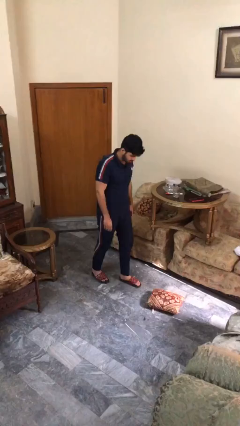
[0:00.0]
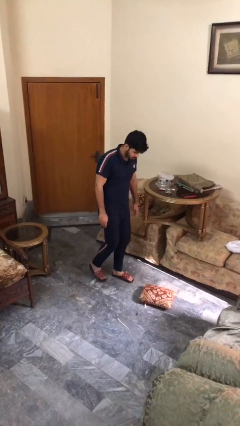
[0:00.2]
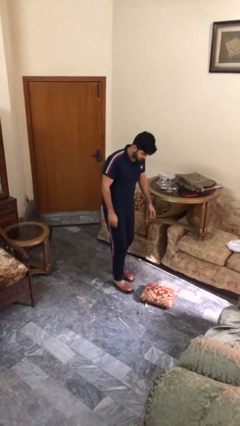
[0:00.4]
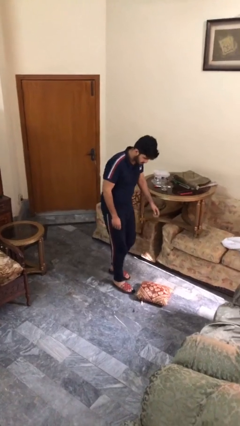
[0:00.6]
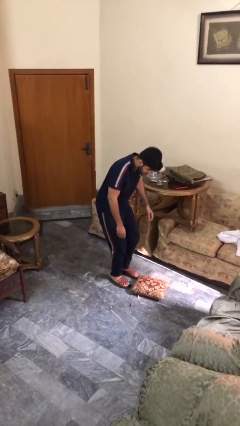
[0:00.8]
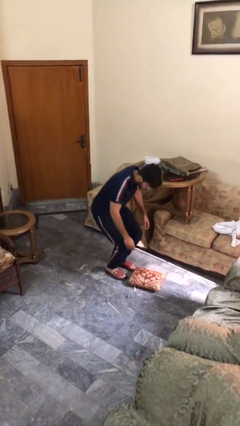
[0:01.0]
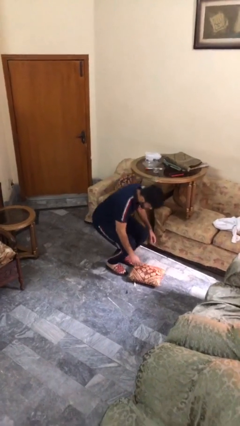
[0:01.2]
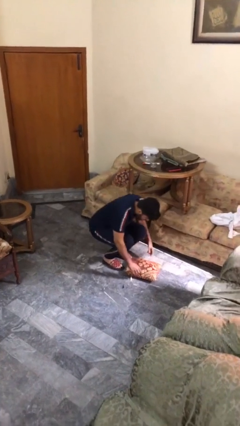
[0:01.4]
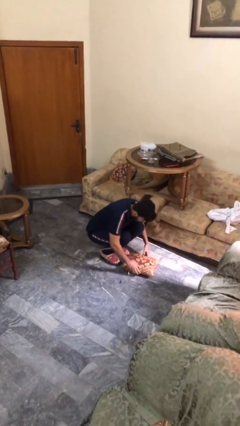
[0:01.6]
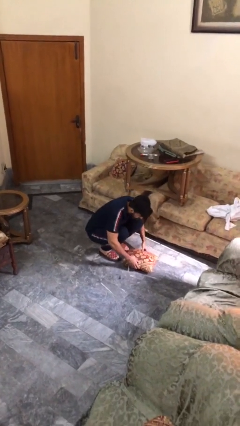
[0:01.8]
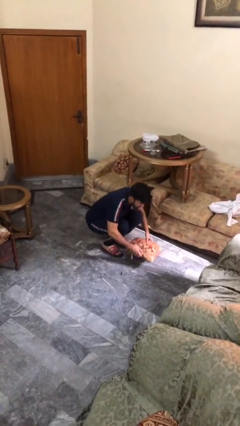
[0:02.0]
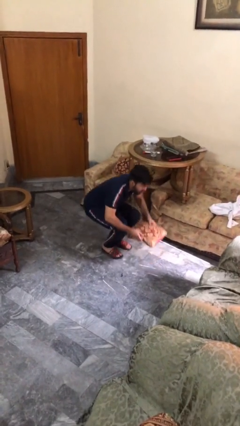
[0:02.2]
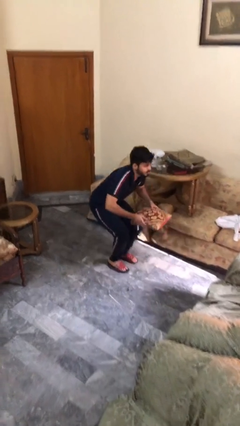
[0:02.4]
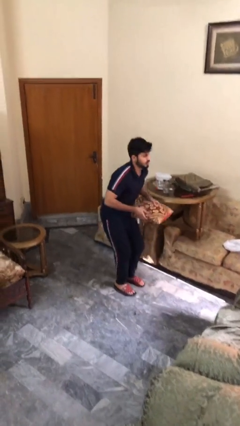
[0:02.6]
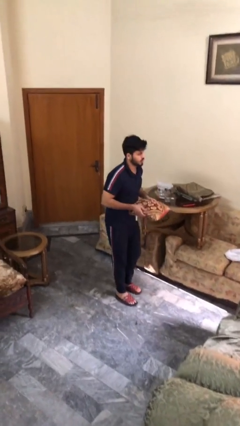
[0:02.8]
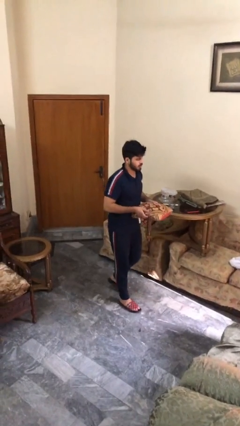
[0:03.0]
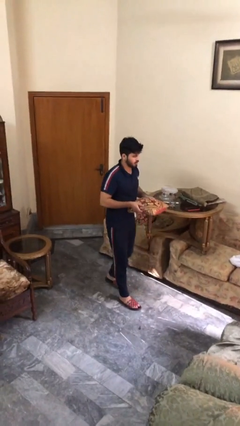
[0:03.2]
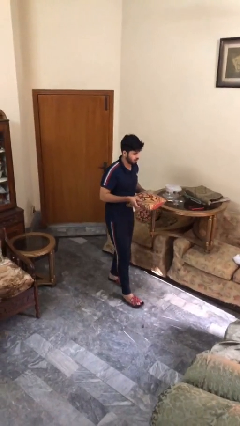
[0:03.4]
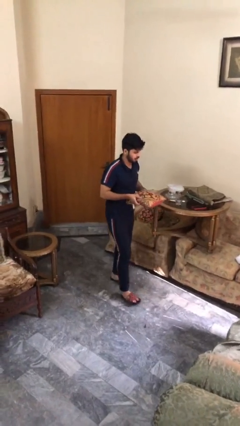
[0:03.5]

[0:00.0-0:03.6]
person picks up object from floor

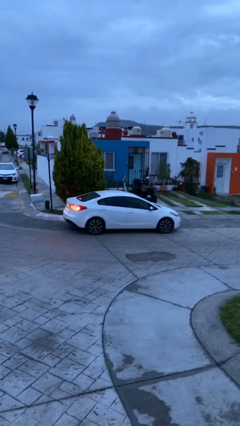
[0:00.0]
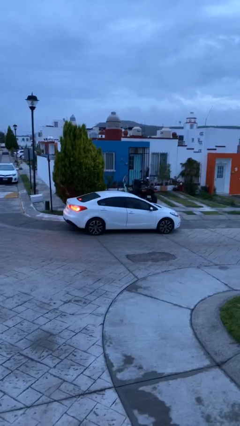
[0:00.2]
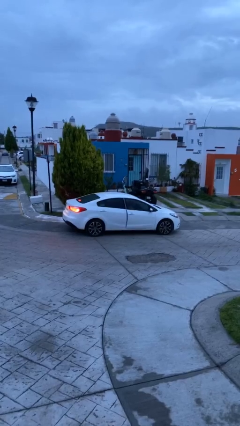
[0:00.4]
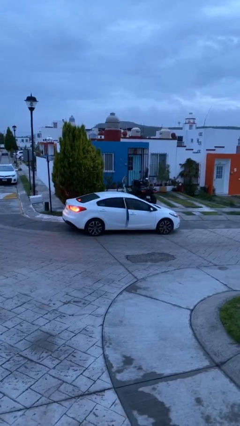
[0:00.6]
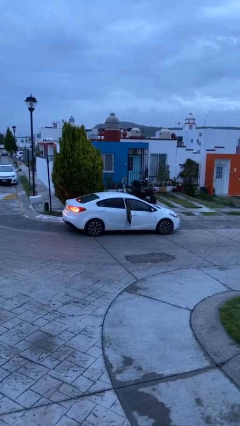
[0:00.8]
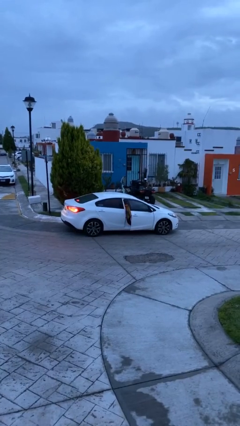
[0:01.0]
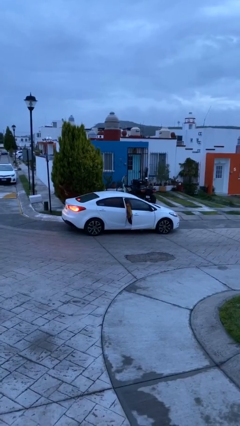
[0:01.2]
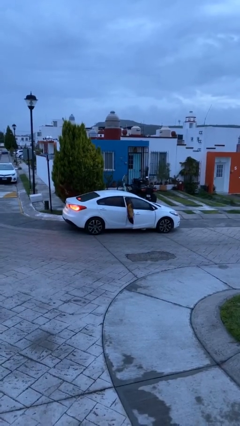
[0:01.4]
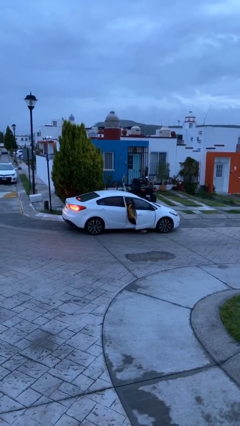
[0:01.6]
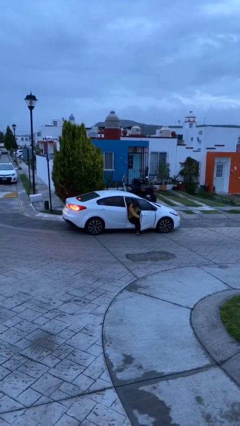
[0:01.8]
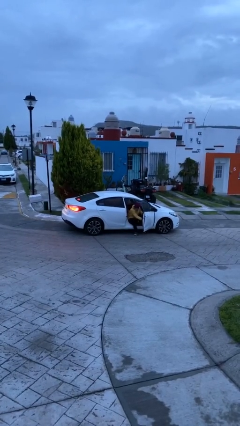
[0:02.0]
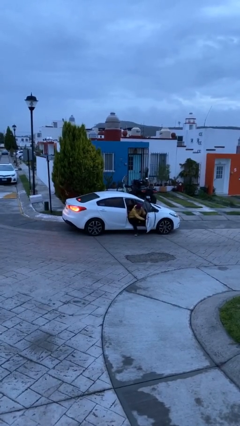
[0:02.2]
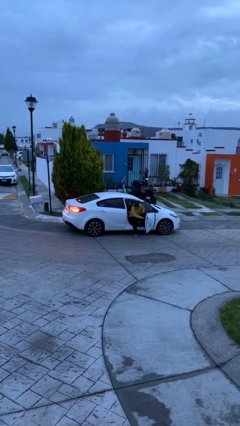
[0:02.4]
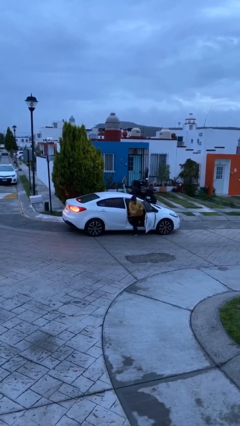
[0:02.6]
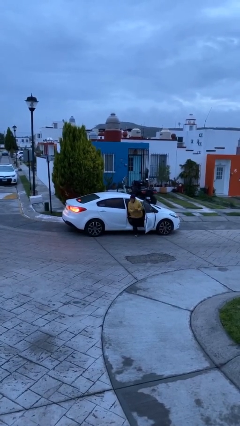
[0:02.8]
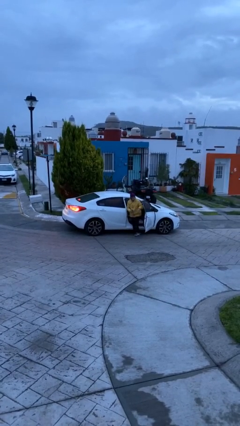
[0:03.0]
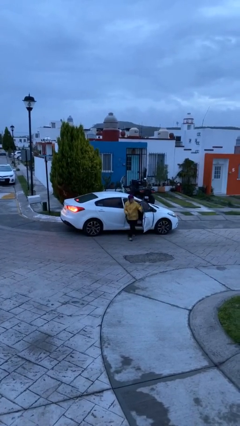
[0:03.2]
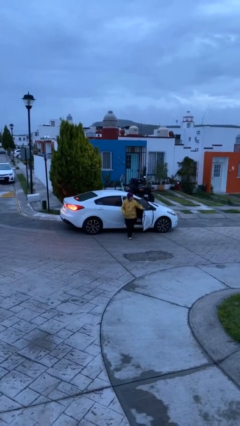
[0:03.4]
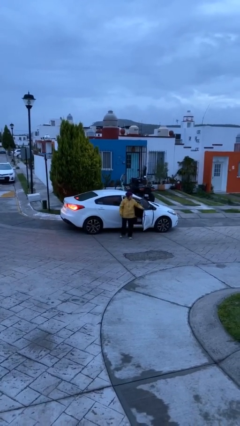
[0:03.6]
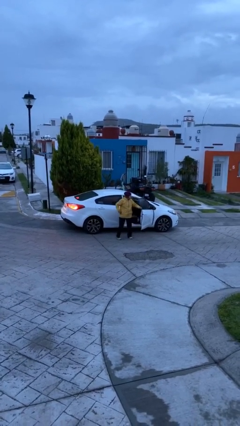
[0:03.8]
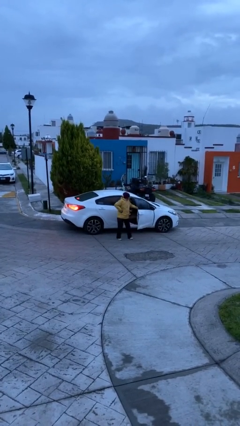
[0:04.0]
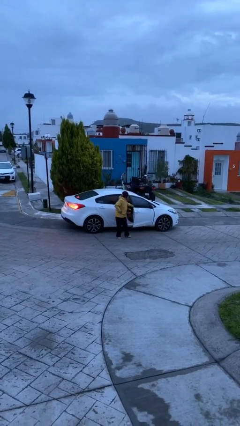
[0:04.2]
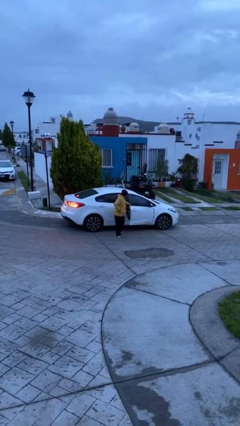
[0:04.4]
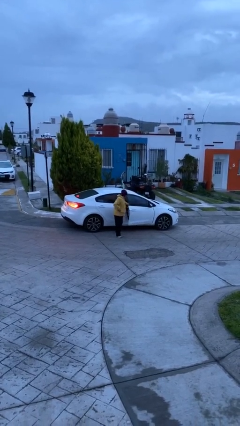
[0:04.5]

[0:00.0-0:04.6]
car drops off person

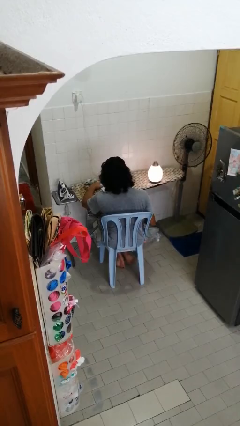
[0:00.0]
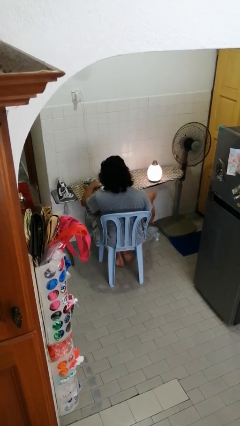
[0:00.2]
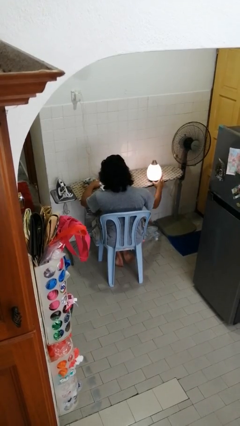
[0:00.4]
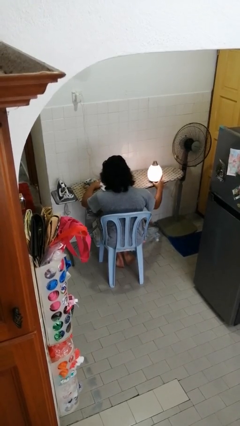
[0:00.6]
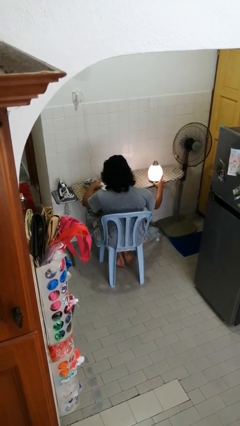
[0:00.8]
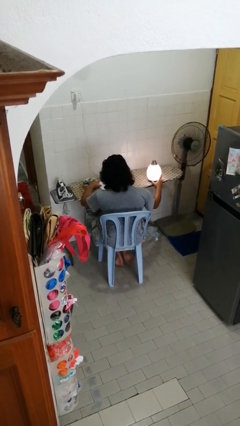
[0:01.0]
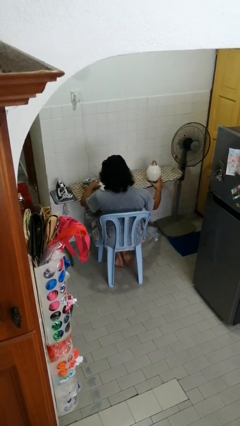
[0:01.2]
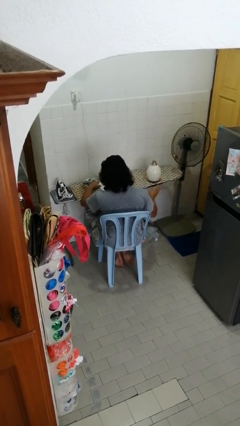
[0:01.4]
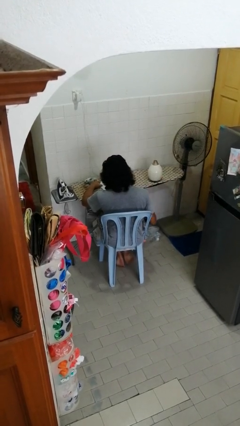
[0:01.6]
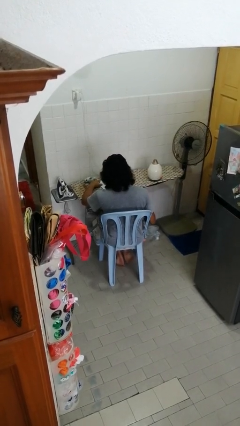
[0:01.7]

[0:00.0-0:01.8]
person turns off lamp

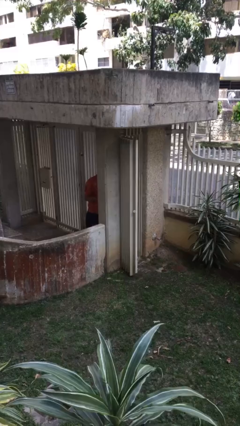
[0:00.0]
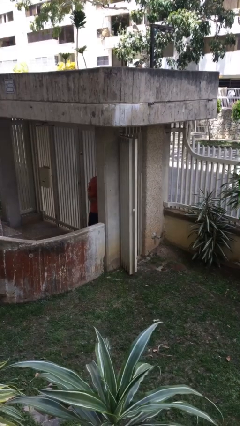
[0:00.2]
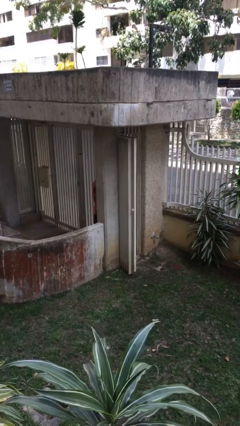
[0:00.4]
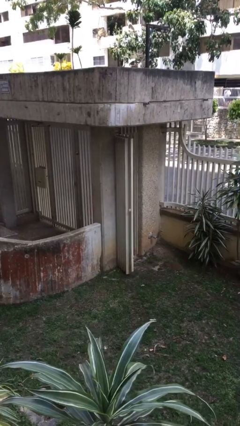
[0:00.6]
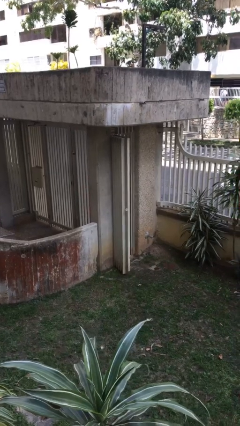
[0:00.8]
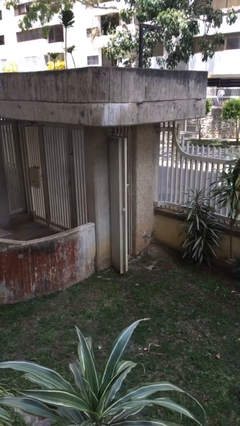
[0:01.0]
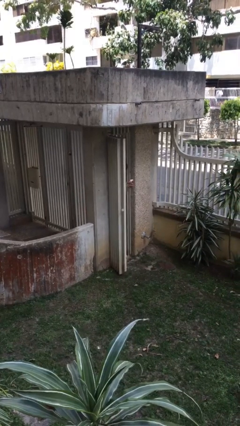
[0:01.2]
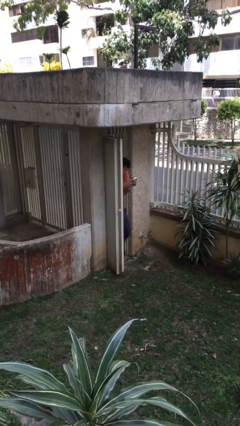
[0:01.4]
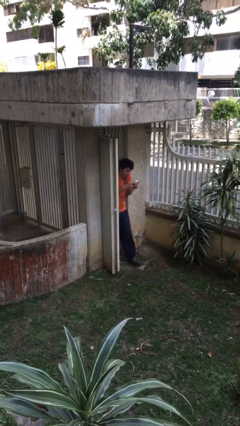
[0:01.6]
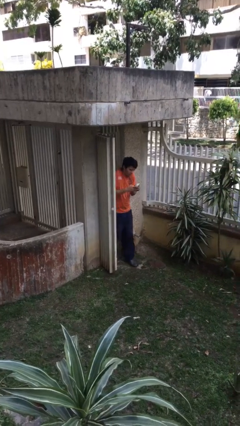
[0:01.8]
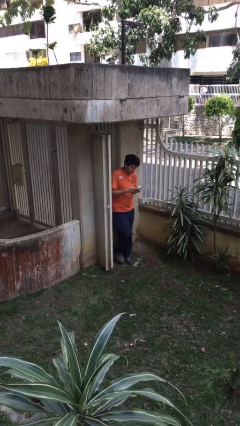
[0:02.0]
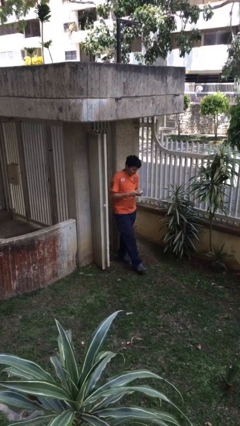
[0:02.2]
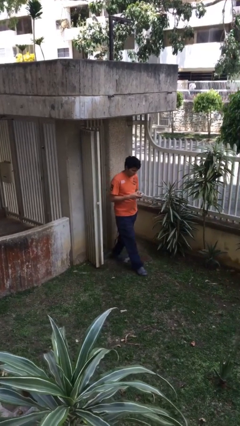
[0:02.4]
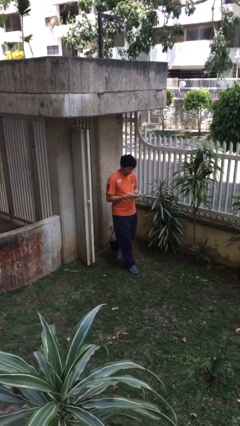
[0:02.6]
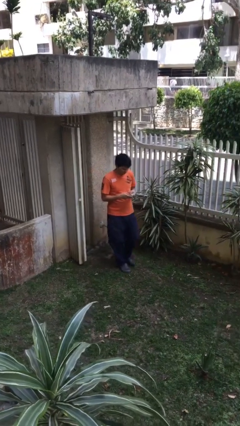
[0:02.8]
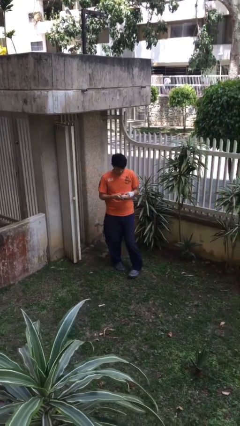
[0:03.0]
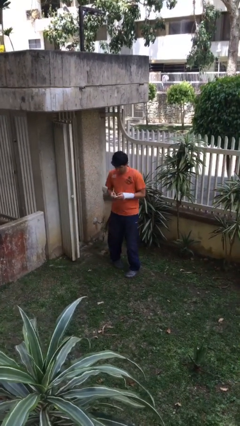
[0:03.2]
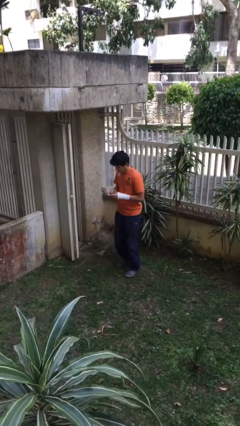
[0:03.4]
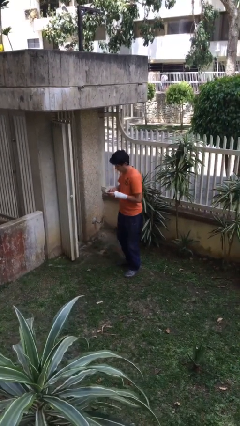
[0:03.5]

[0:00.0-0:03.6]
person enters scene through structure

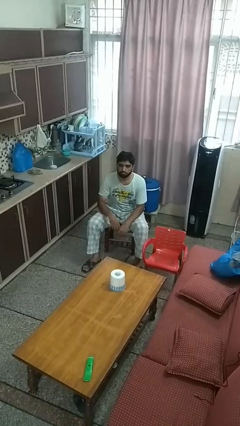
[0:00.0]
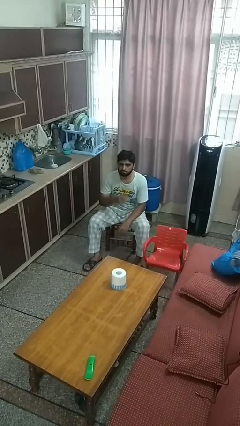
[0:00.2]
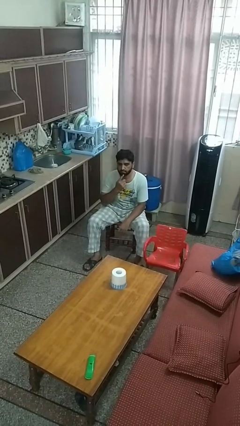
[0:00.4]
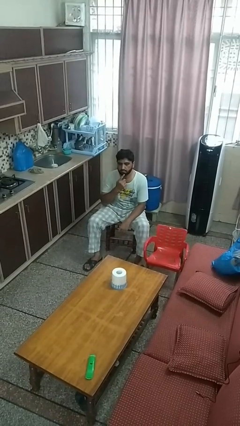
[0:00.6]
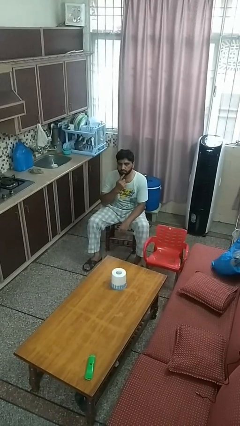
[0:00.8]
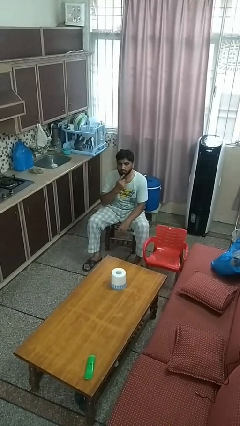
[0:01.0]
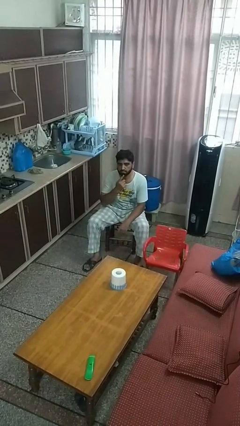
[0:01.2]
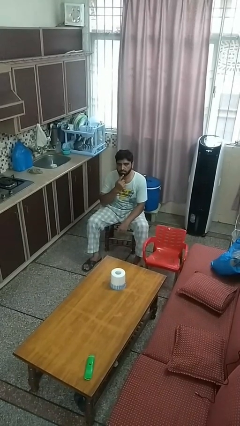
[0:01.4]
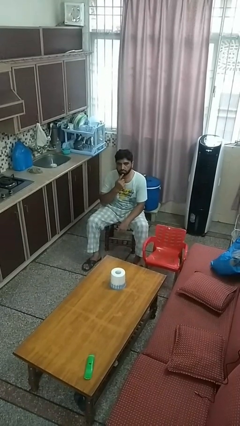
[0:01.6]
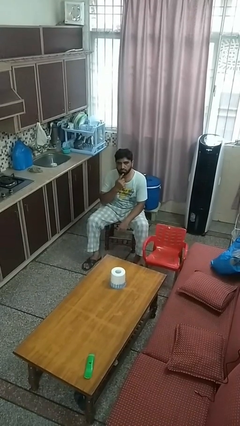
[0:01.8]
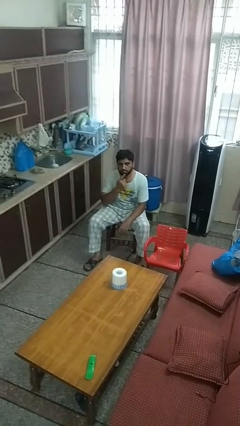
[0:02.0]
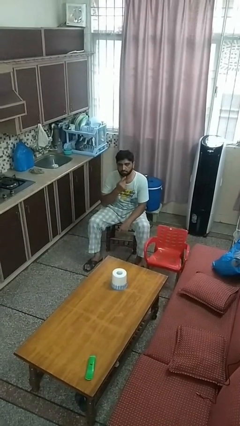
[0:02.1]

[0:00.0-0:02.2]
person strokes chin

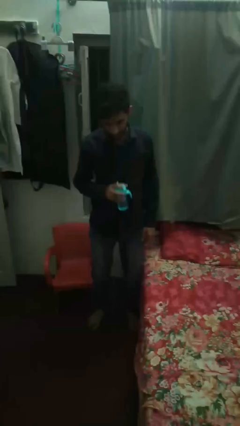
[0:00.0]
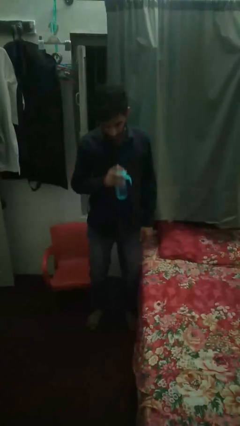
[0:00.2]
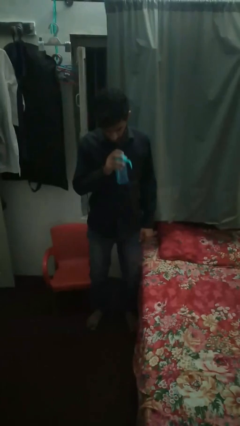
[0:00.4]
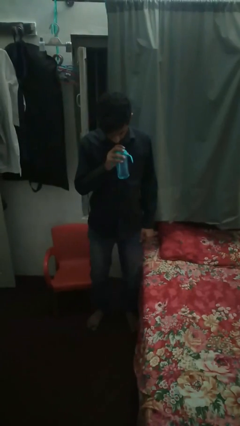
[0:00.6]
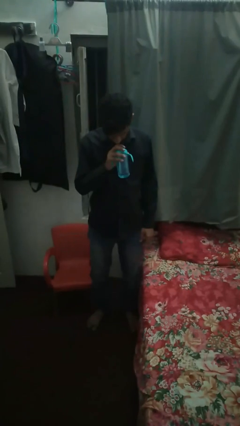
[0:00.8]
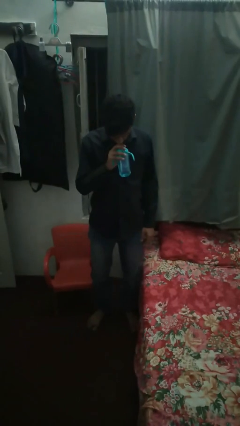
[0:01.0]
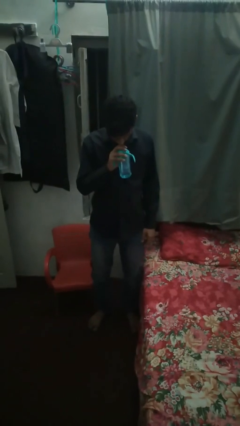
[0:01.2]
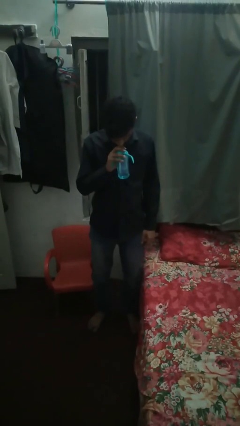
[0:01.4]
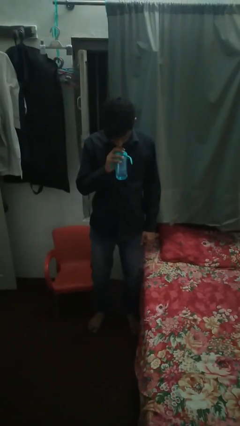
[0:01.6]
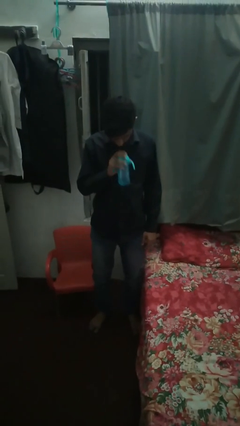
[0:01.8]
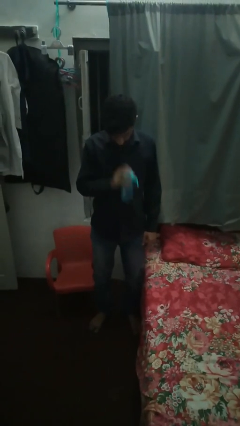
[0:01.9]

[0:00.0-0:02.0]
person drinks from straw
